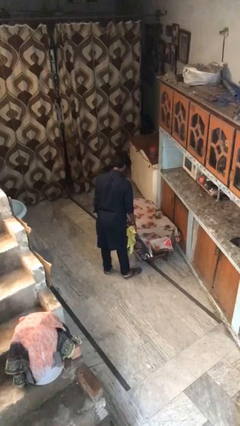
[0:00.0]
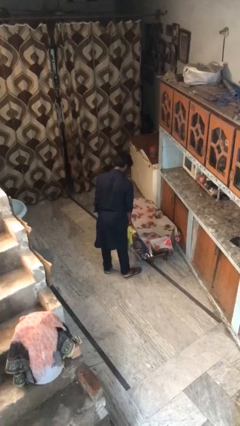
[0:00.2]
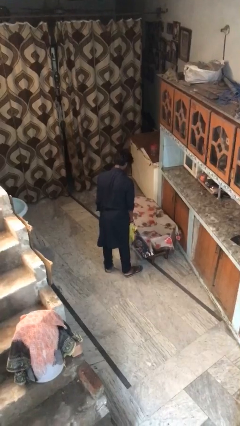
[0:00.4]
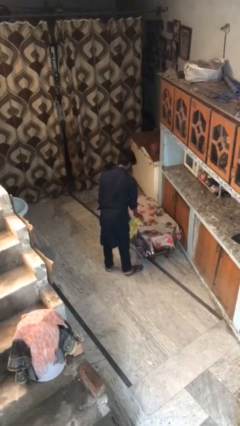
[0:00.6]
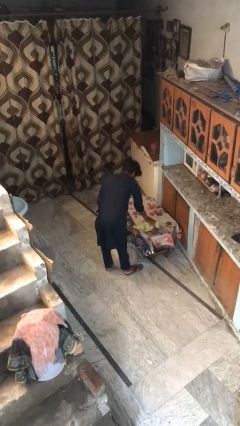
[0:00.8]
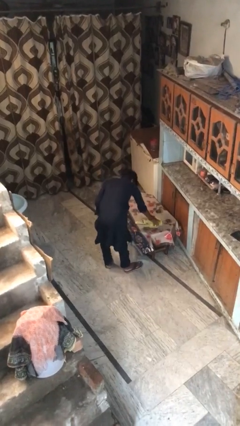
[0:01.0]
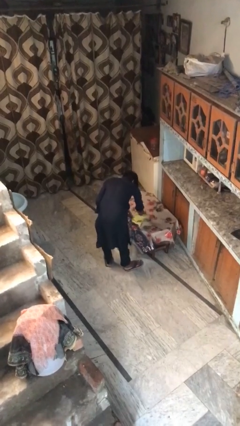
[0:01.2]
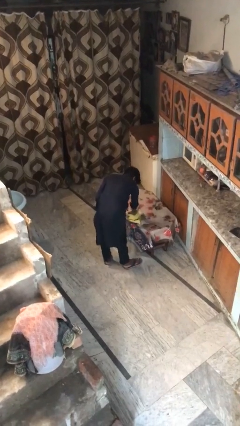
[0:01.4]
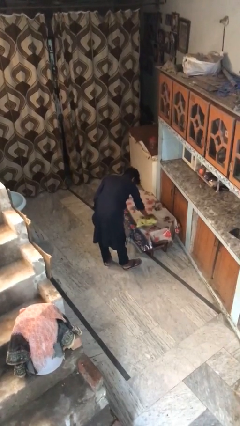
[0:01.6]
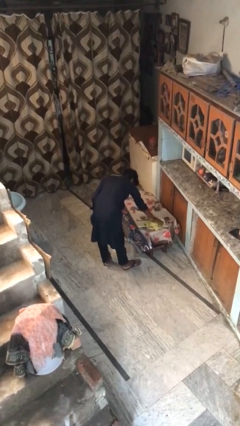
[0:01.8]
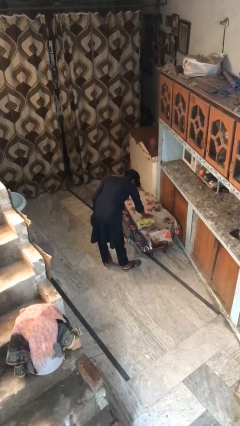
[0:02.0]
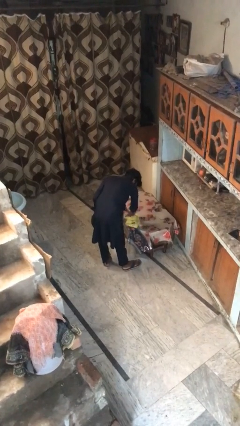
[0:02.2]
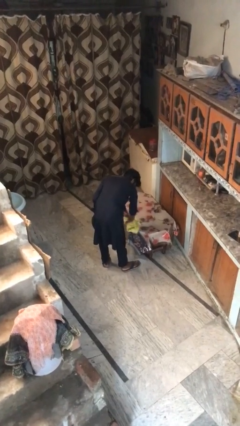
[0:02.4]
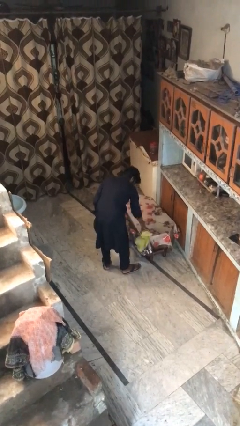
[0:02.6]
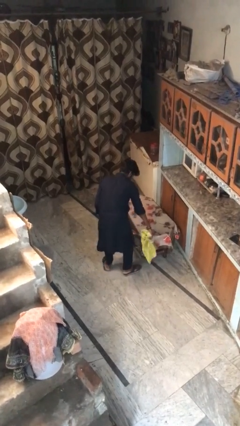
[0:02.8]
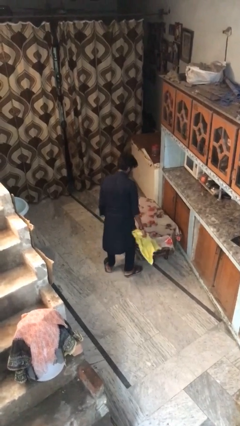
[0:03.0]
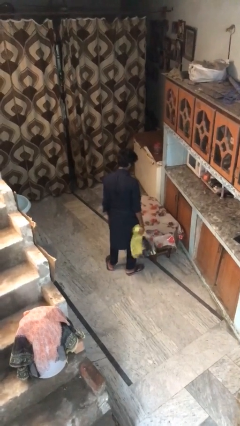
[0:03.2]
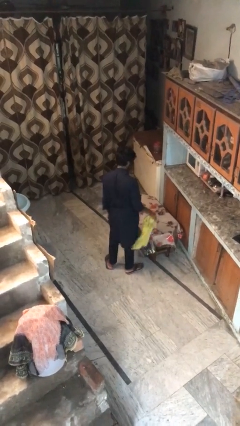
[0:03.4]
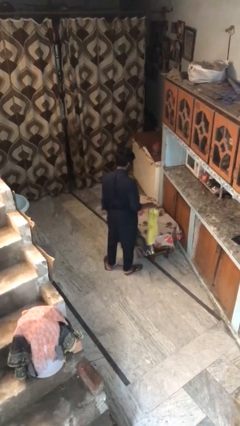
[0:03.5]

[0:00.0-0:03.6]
person cleans table with rag

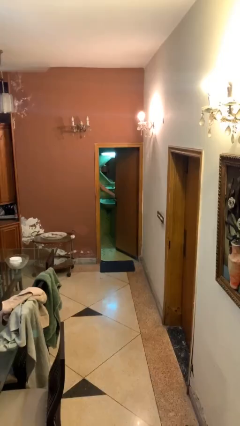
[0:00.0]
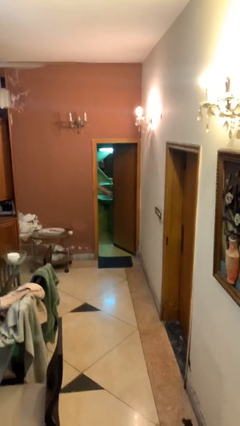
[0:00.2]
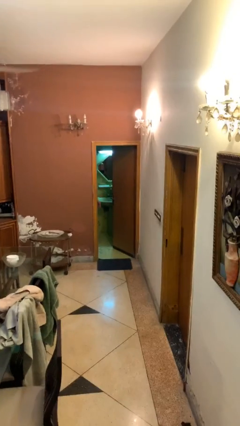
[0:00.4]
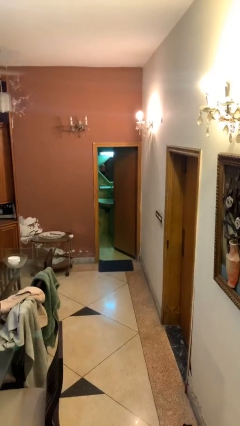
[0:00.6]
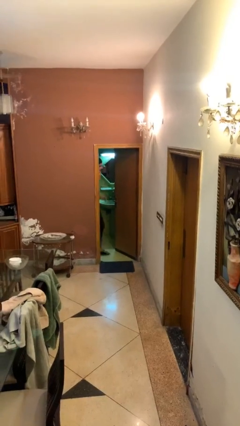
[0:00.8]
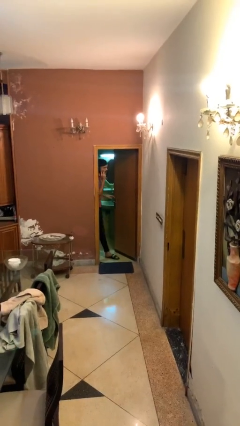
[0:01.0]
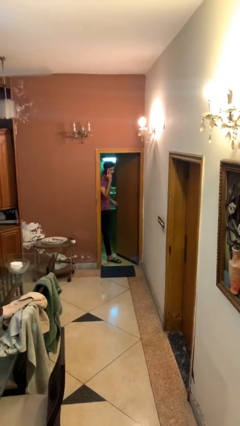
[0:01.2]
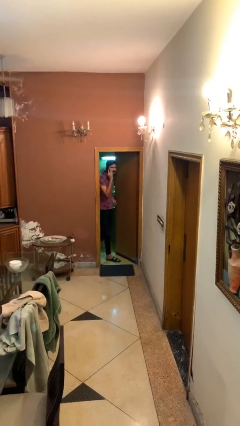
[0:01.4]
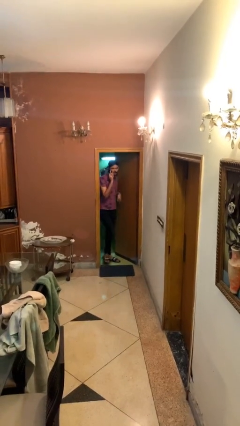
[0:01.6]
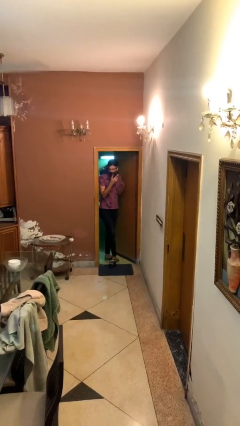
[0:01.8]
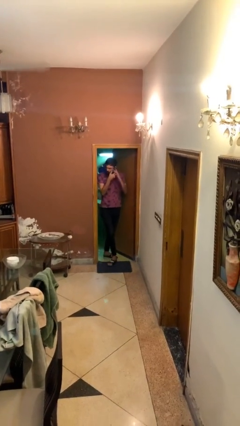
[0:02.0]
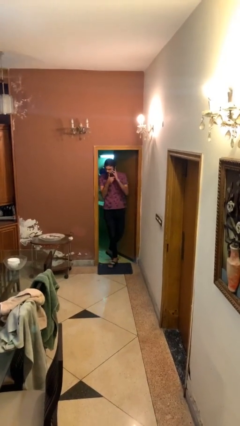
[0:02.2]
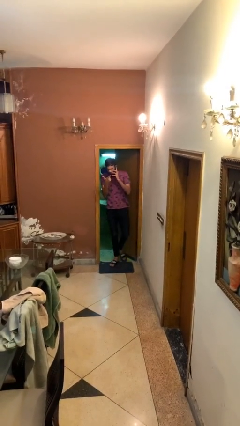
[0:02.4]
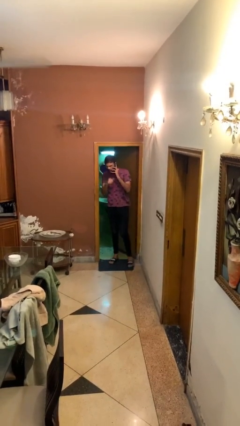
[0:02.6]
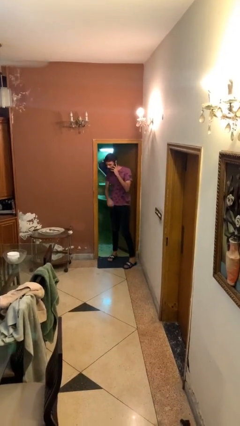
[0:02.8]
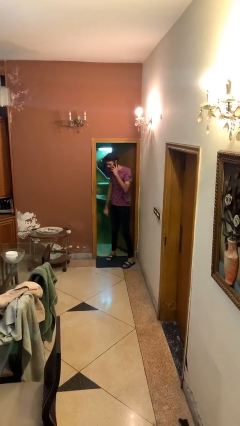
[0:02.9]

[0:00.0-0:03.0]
person enters scene through structure

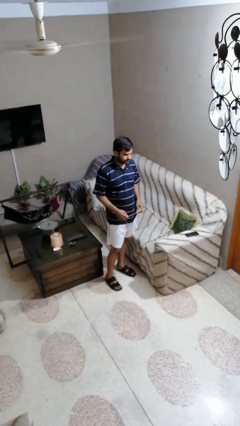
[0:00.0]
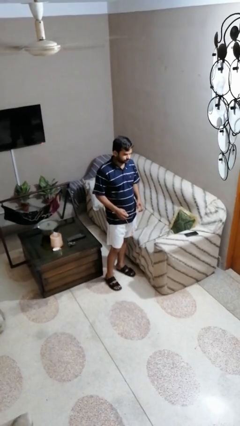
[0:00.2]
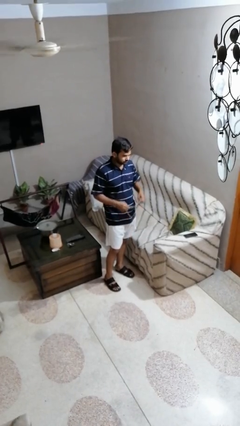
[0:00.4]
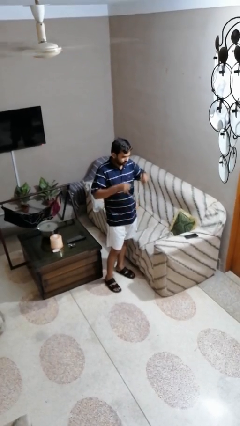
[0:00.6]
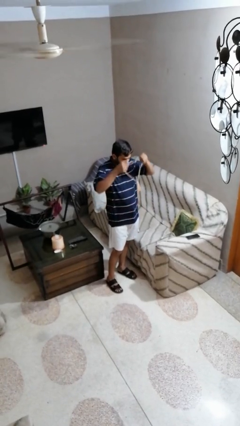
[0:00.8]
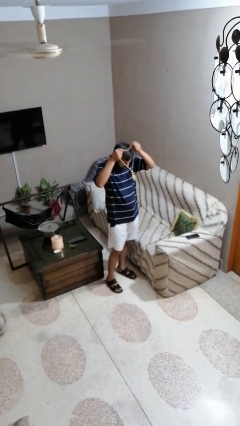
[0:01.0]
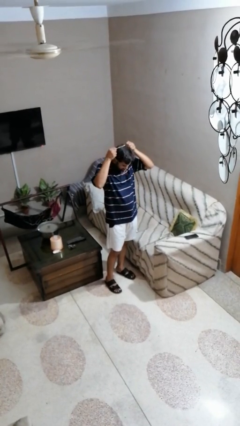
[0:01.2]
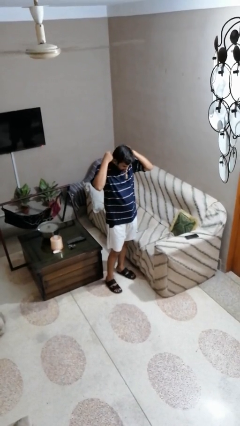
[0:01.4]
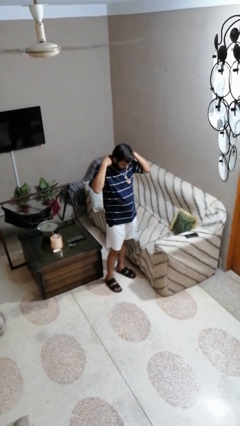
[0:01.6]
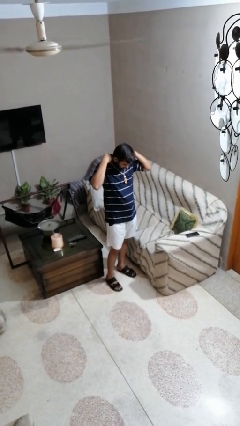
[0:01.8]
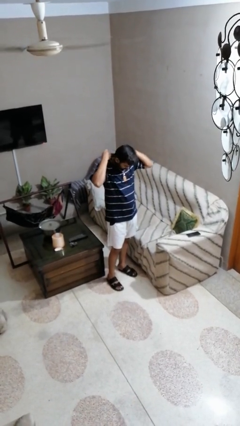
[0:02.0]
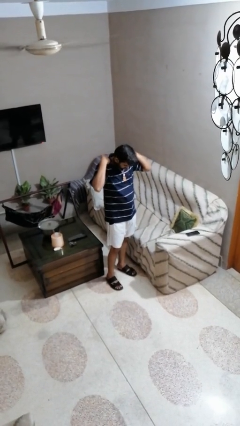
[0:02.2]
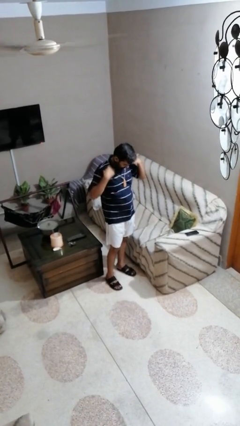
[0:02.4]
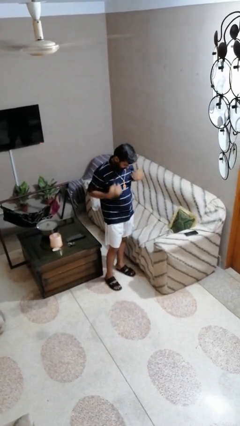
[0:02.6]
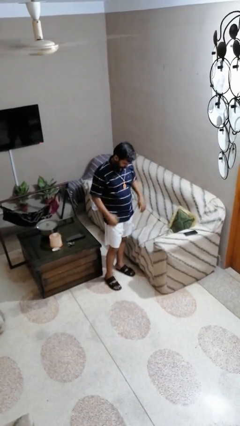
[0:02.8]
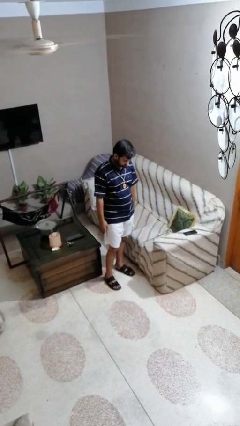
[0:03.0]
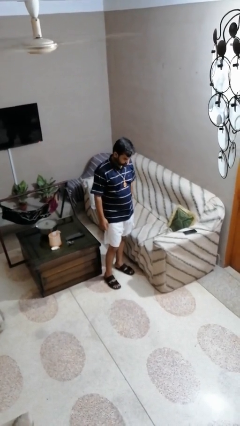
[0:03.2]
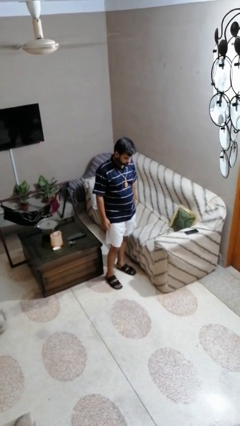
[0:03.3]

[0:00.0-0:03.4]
person puts on necklace

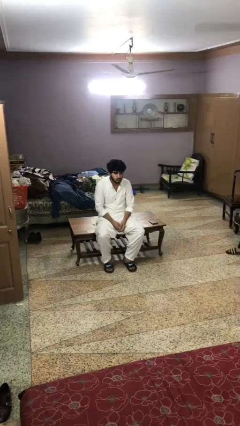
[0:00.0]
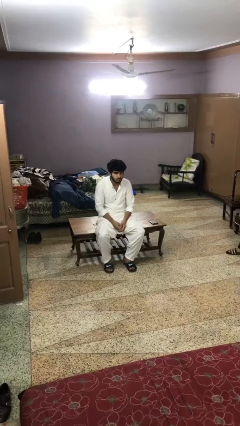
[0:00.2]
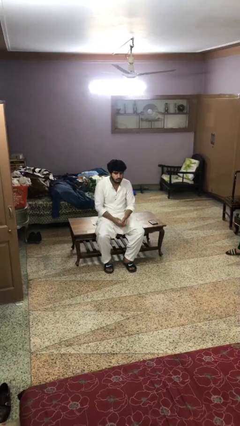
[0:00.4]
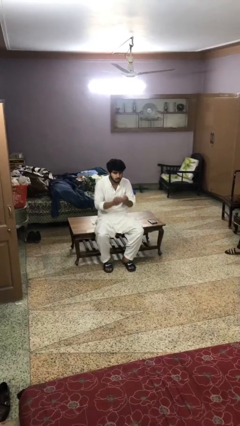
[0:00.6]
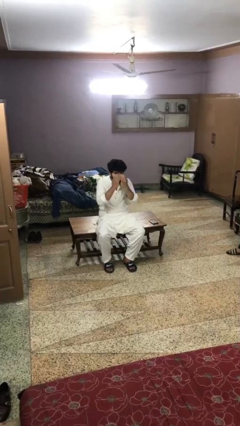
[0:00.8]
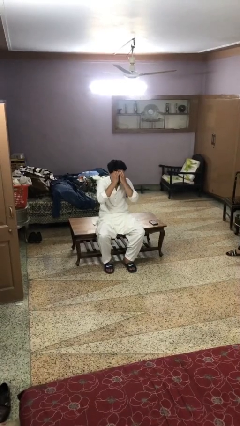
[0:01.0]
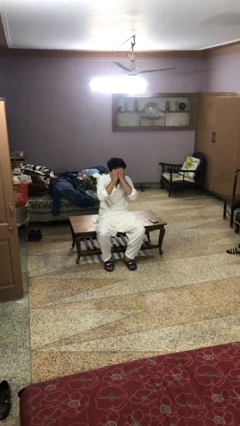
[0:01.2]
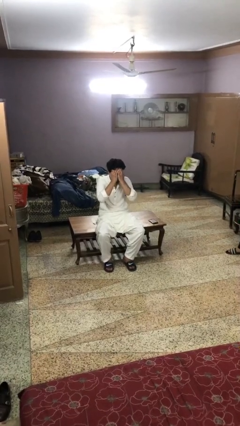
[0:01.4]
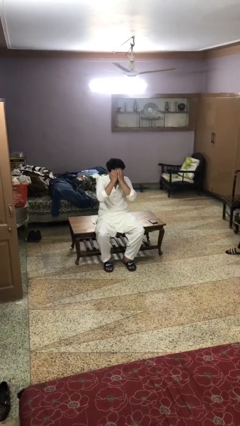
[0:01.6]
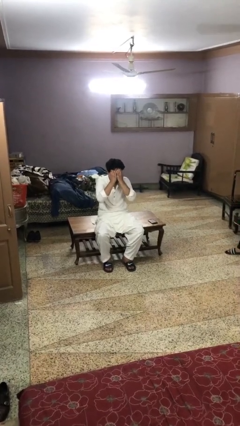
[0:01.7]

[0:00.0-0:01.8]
person covers face with hands

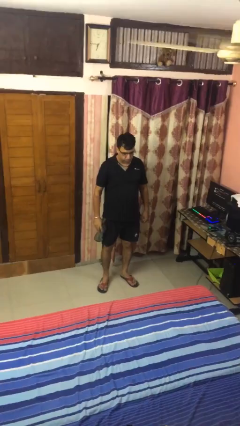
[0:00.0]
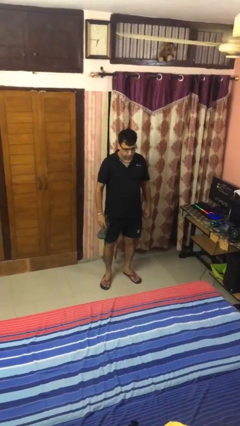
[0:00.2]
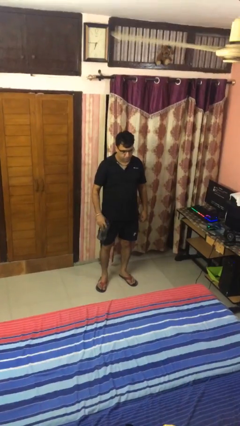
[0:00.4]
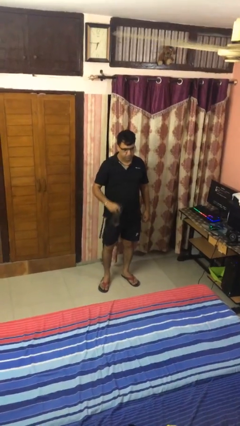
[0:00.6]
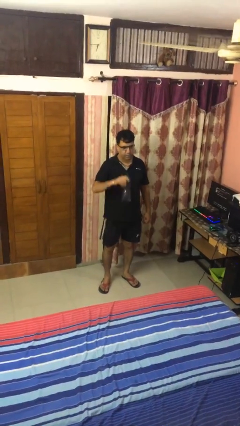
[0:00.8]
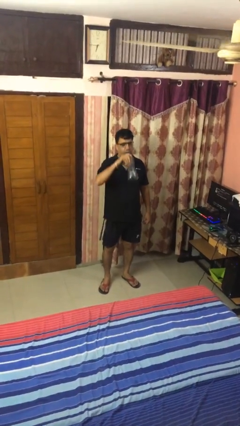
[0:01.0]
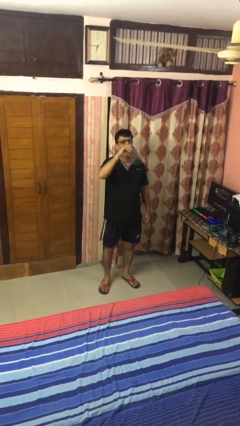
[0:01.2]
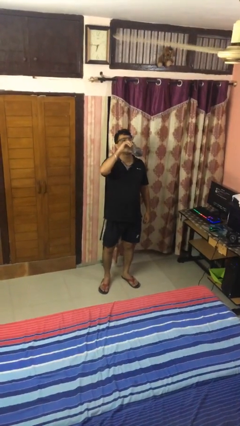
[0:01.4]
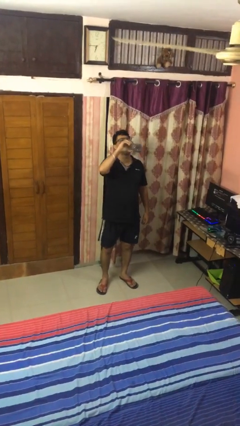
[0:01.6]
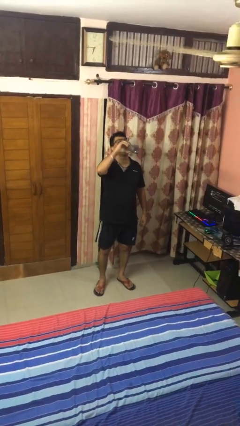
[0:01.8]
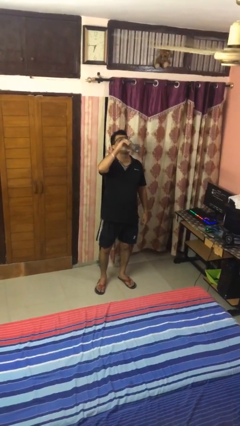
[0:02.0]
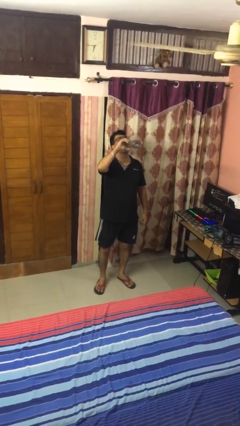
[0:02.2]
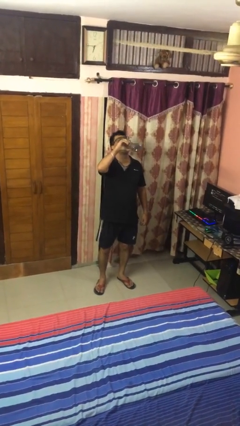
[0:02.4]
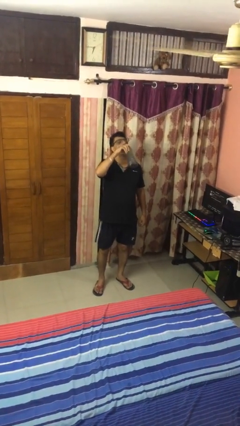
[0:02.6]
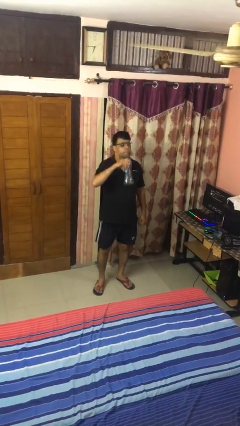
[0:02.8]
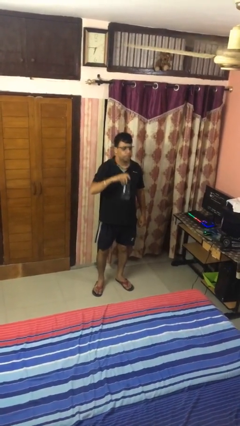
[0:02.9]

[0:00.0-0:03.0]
person drinks from bottle

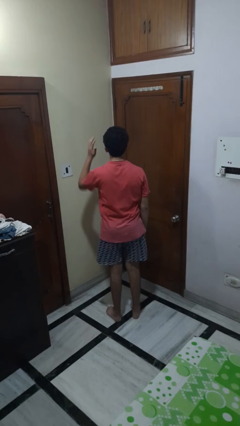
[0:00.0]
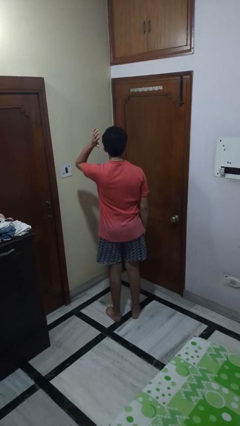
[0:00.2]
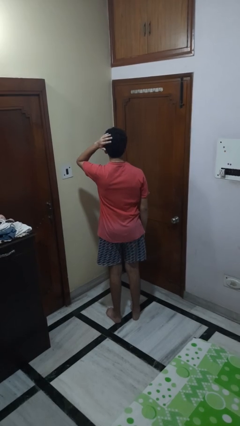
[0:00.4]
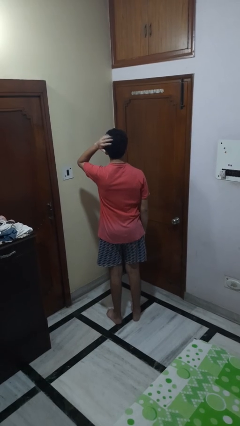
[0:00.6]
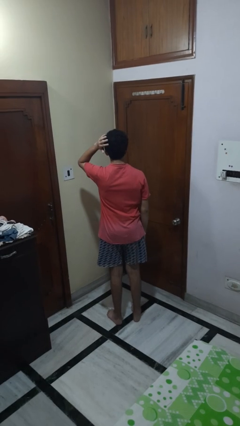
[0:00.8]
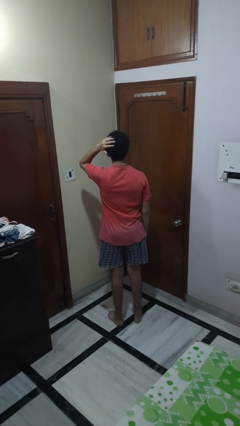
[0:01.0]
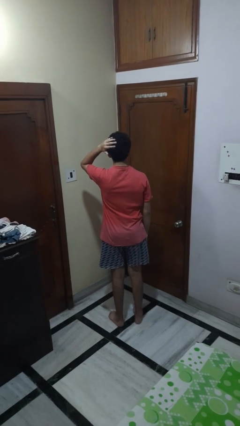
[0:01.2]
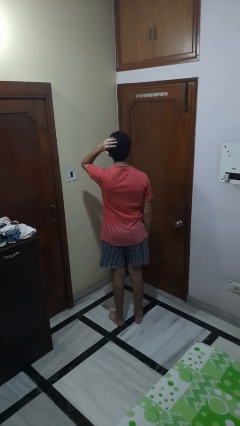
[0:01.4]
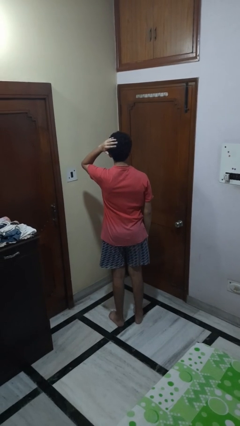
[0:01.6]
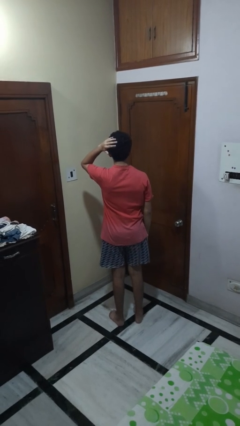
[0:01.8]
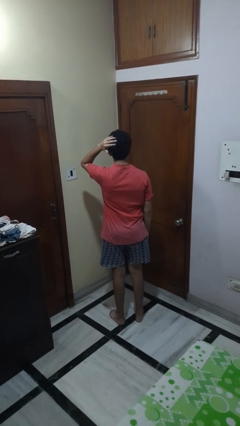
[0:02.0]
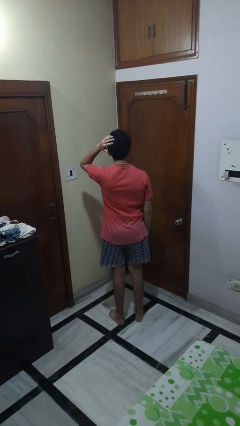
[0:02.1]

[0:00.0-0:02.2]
person pats head
